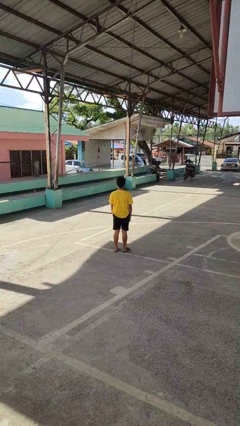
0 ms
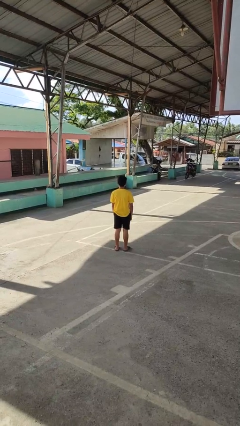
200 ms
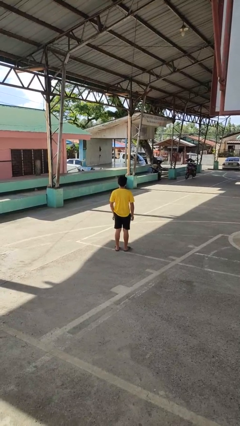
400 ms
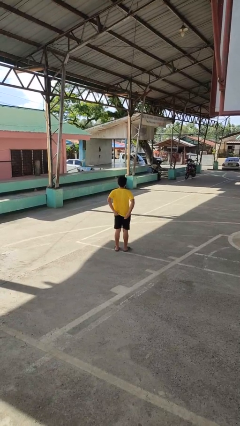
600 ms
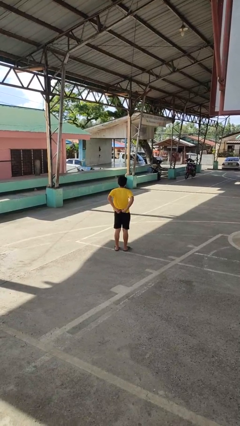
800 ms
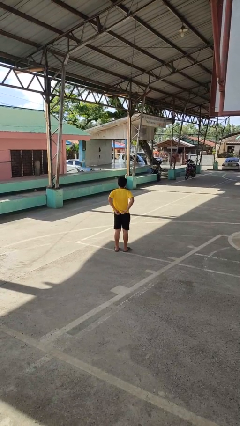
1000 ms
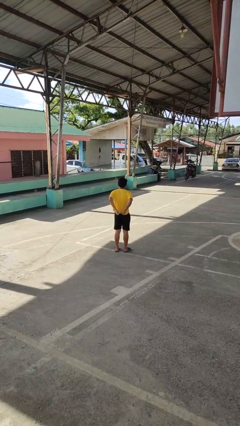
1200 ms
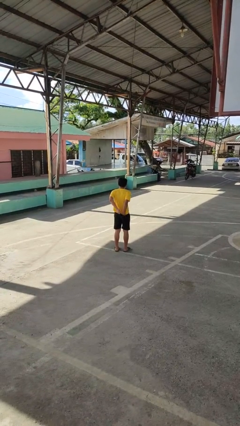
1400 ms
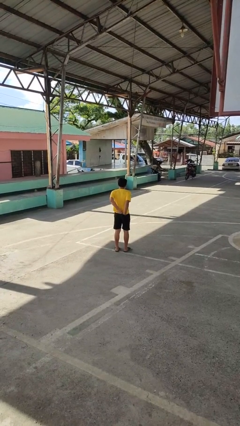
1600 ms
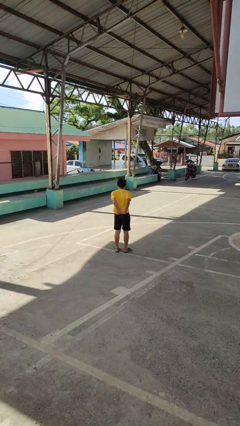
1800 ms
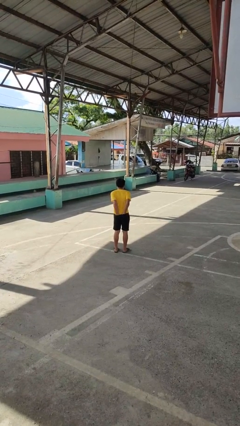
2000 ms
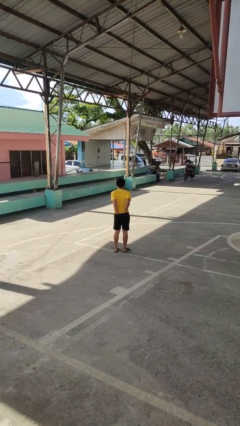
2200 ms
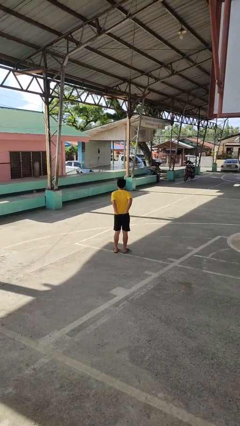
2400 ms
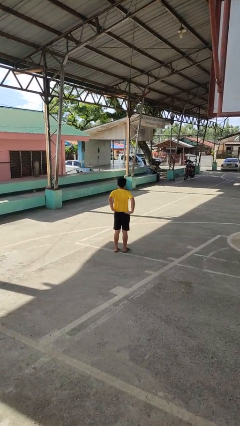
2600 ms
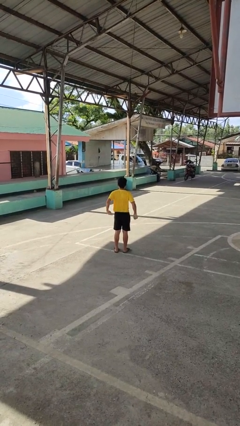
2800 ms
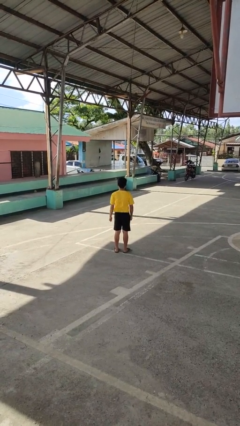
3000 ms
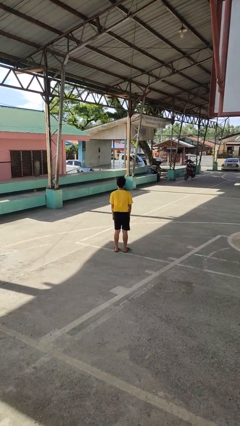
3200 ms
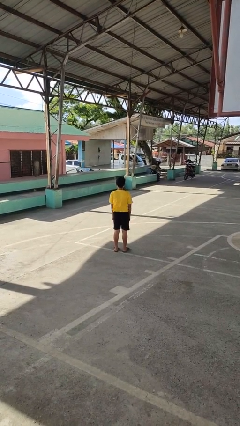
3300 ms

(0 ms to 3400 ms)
person tucks in shirt

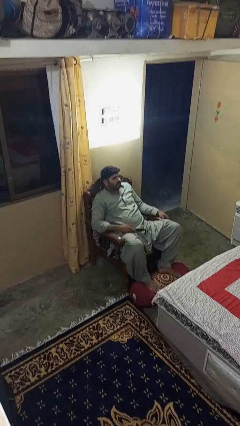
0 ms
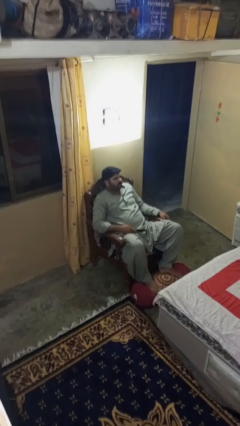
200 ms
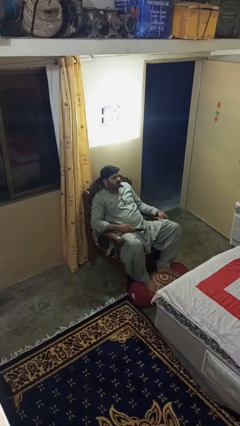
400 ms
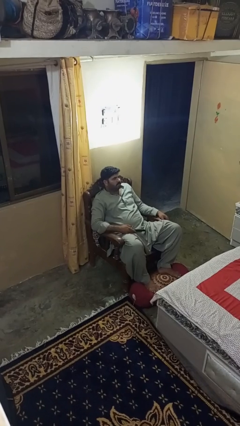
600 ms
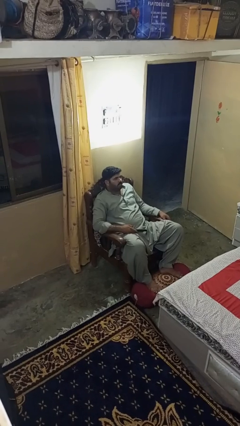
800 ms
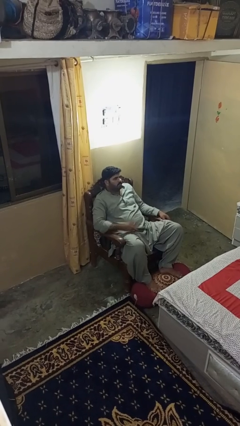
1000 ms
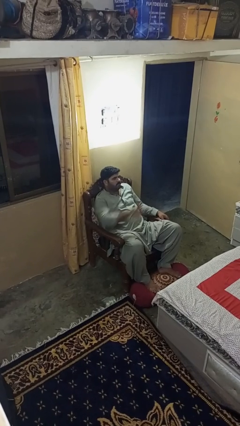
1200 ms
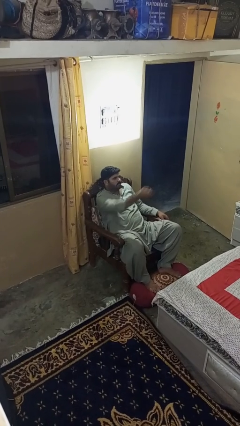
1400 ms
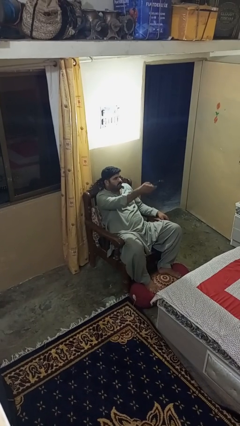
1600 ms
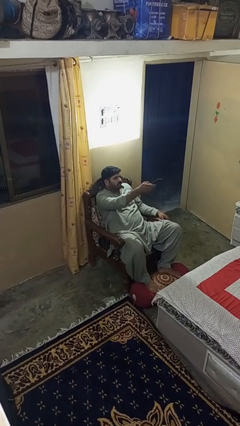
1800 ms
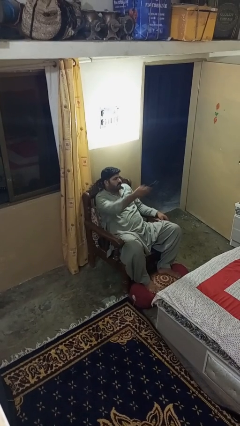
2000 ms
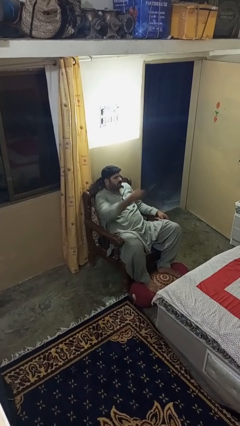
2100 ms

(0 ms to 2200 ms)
person uses television remote

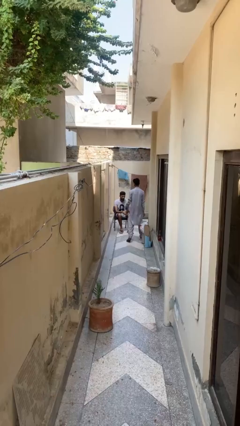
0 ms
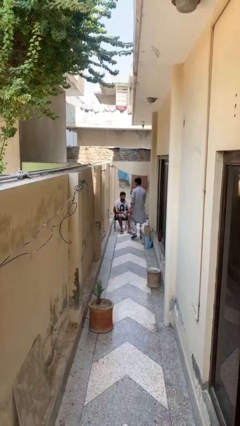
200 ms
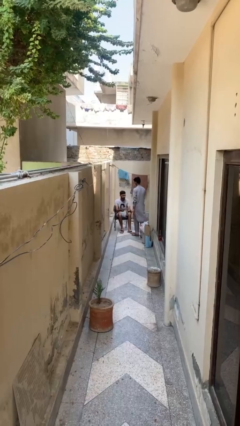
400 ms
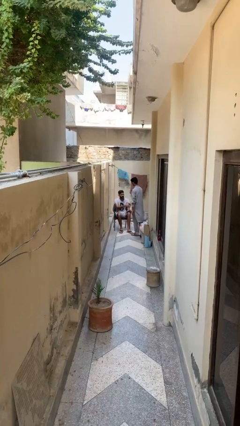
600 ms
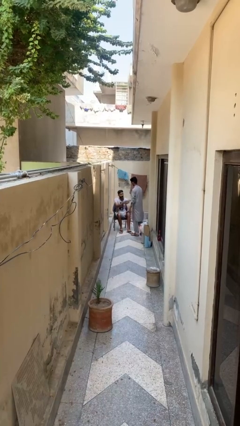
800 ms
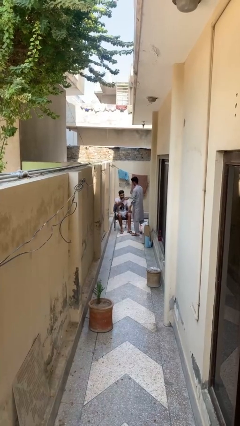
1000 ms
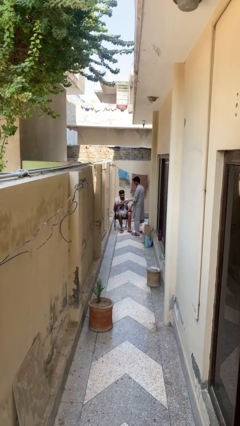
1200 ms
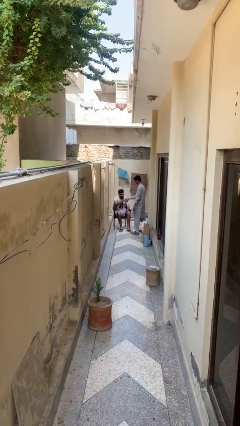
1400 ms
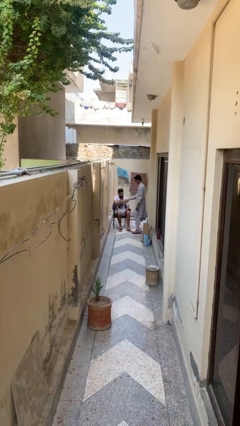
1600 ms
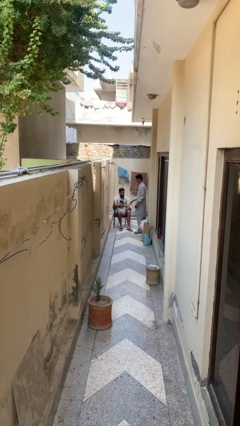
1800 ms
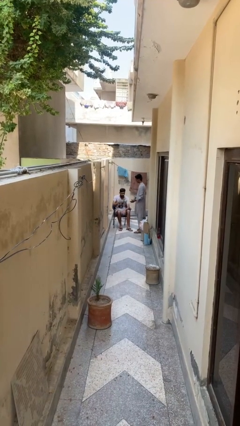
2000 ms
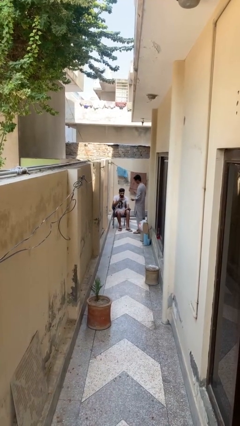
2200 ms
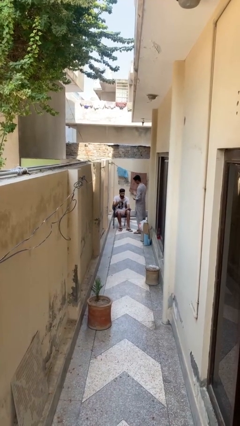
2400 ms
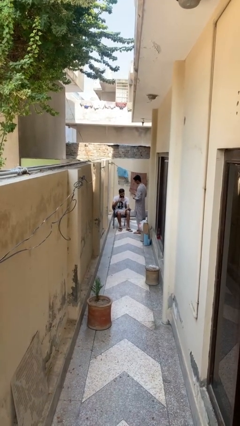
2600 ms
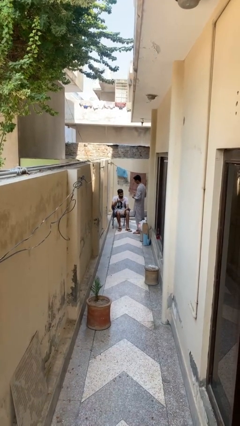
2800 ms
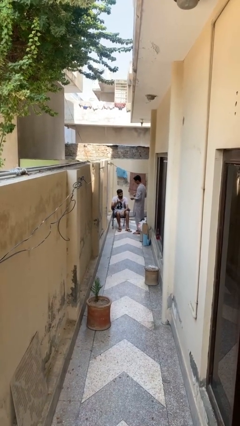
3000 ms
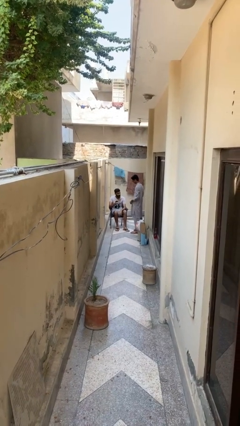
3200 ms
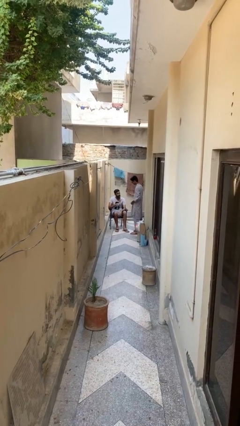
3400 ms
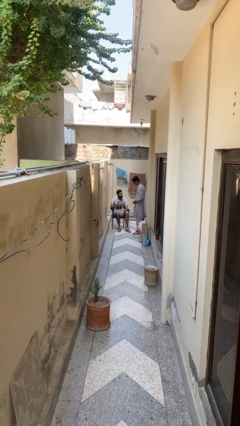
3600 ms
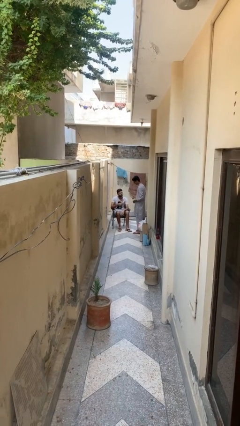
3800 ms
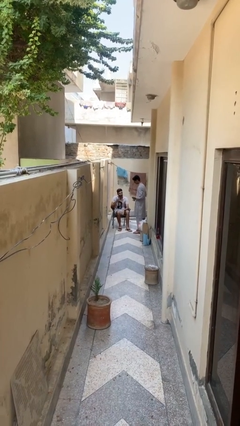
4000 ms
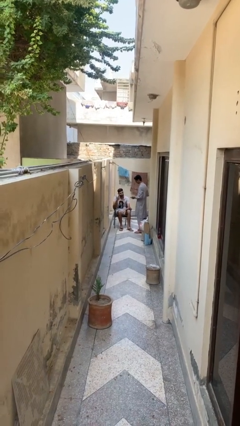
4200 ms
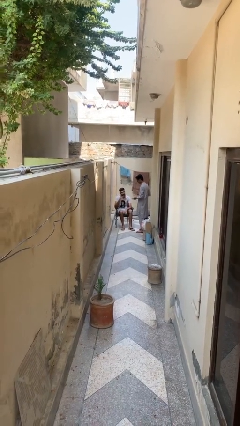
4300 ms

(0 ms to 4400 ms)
person shakes hand

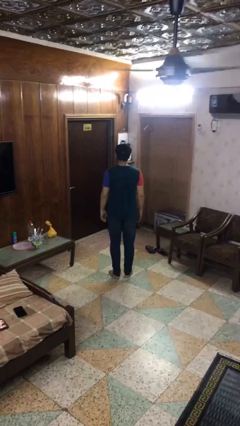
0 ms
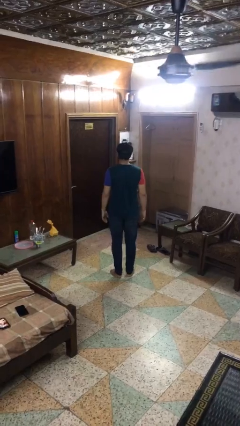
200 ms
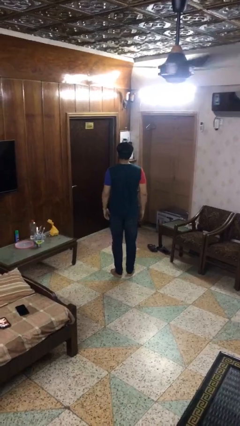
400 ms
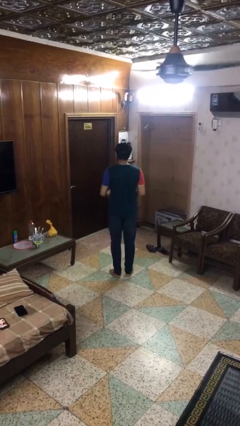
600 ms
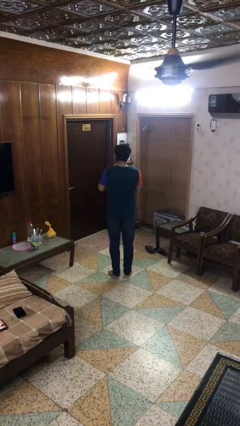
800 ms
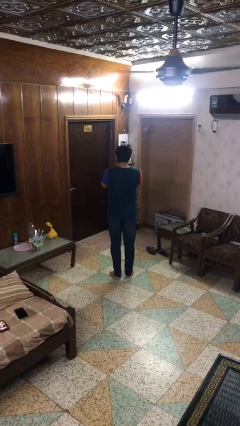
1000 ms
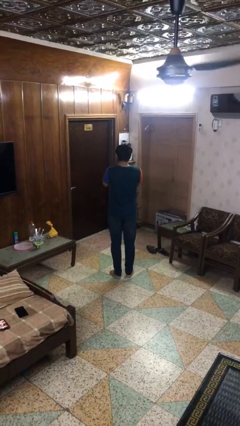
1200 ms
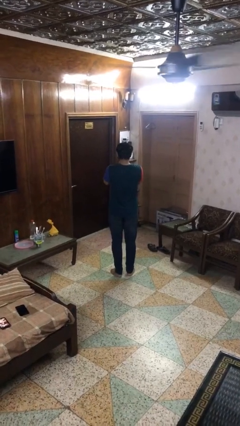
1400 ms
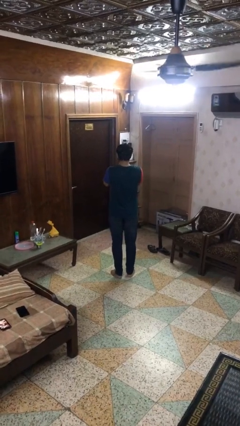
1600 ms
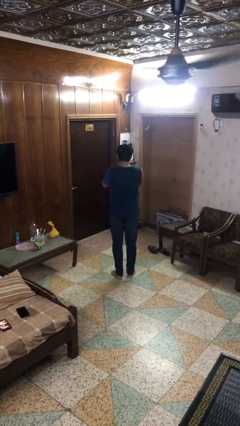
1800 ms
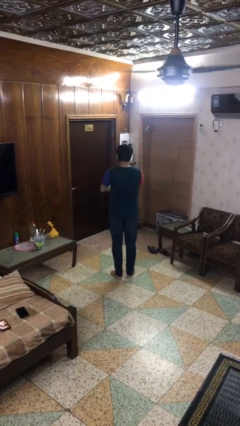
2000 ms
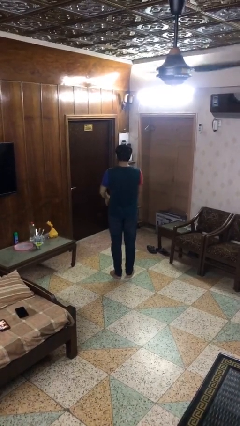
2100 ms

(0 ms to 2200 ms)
person sneezes into hand

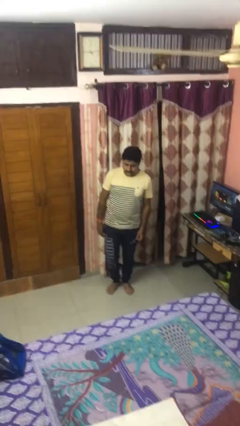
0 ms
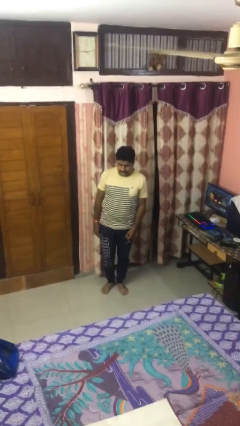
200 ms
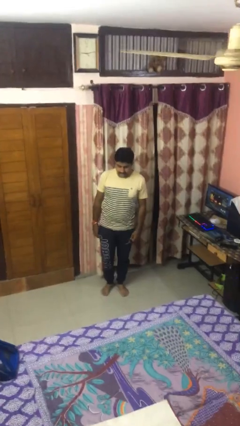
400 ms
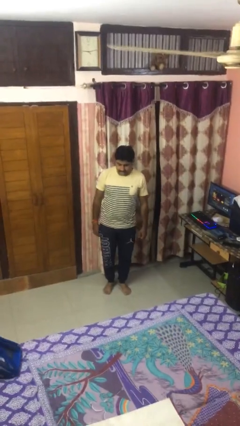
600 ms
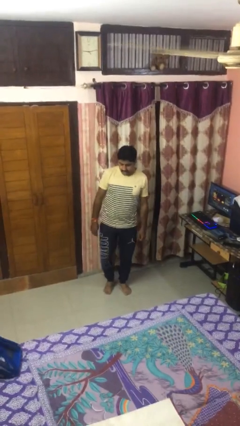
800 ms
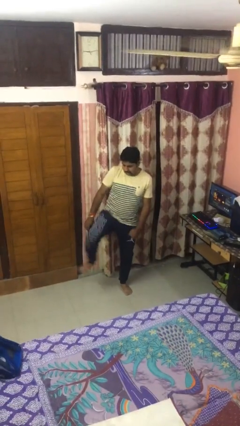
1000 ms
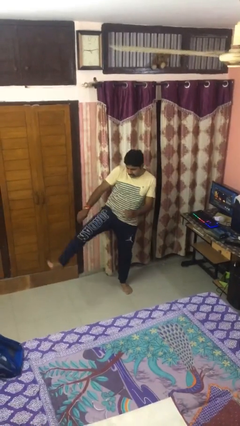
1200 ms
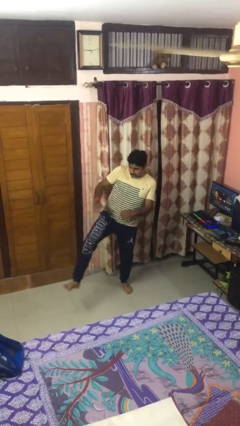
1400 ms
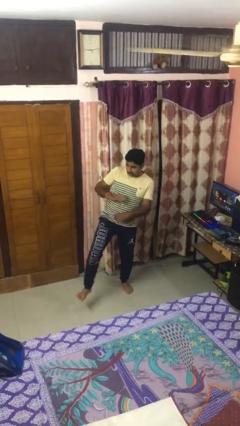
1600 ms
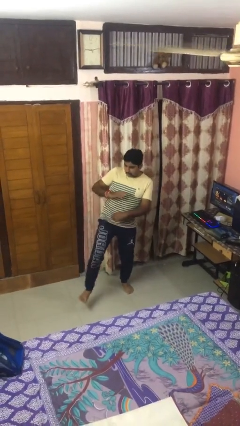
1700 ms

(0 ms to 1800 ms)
person karate kicks

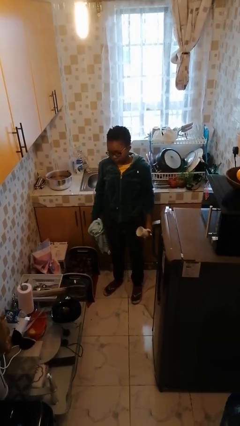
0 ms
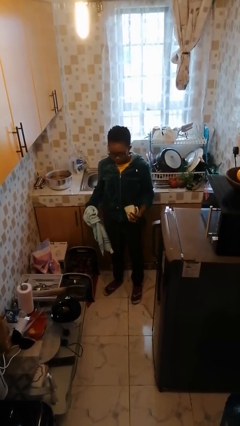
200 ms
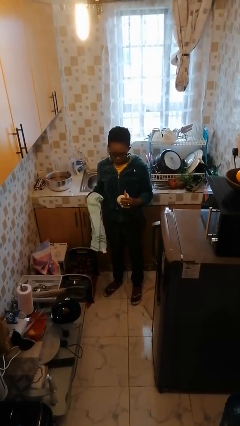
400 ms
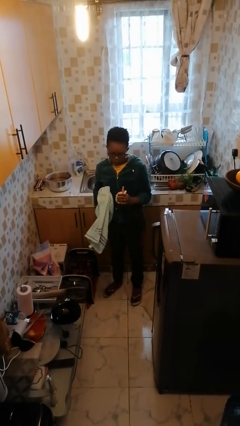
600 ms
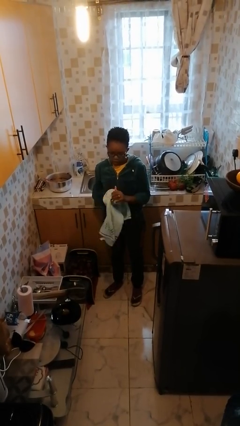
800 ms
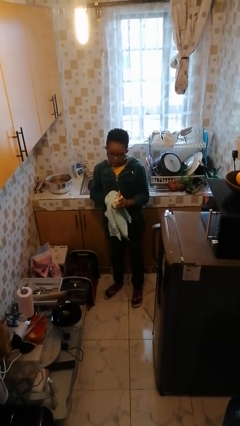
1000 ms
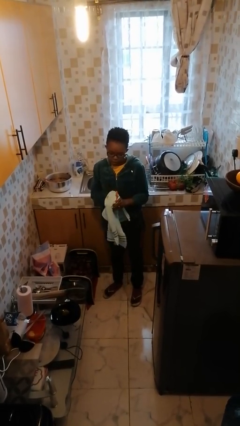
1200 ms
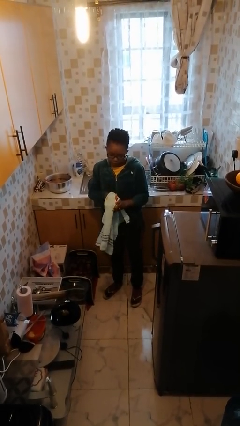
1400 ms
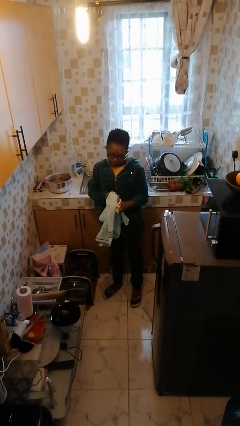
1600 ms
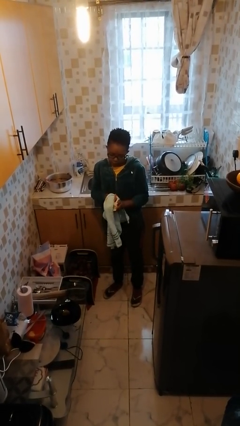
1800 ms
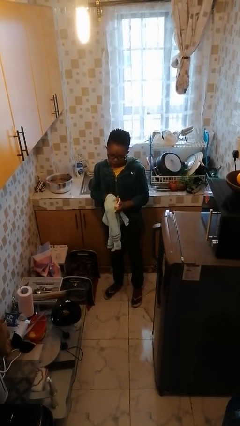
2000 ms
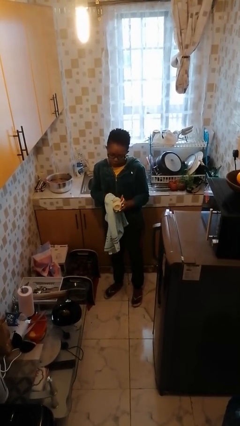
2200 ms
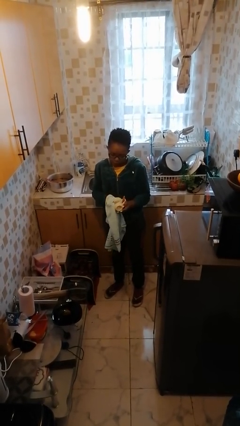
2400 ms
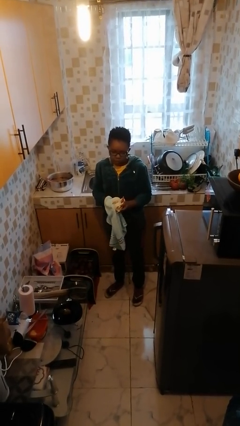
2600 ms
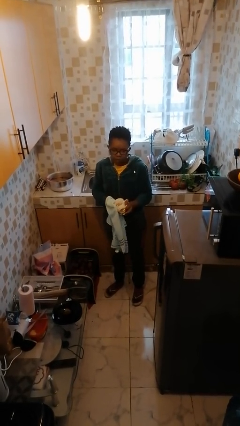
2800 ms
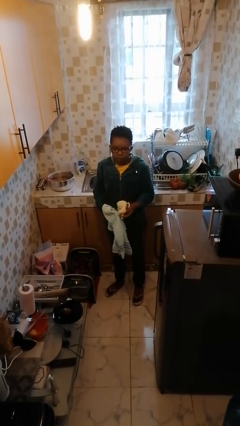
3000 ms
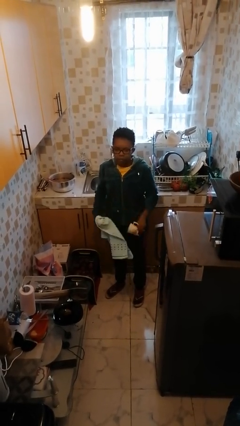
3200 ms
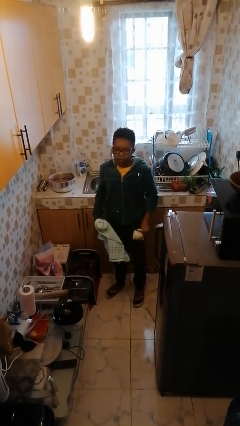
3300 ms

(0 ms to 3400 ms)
person dries dish
